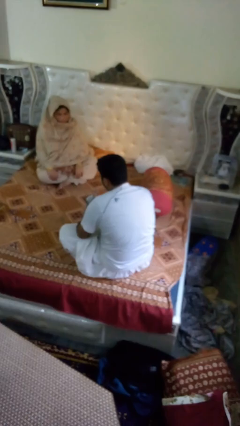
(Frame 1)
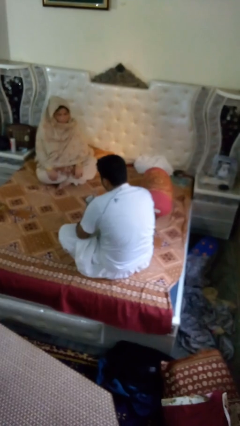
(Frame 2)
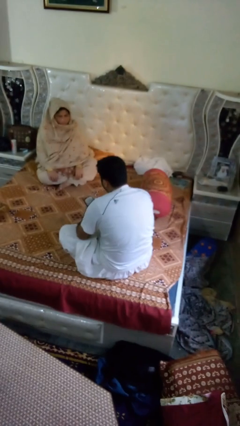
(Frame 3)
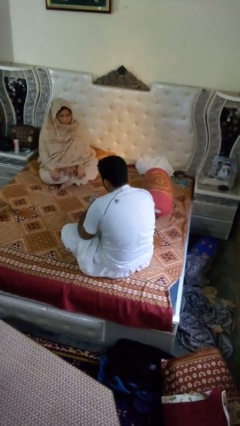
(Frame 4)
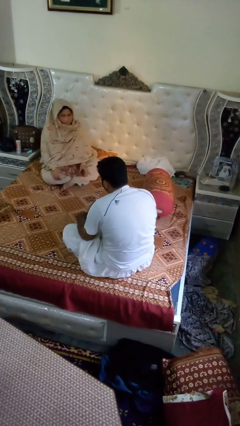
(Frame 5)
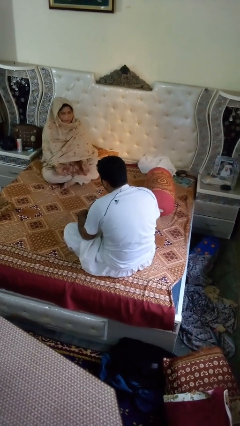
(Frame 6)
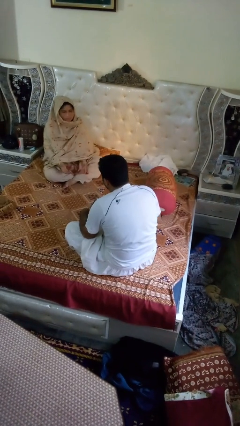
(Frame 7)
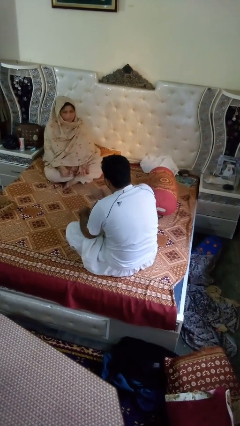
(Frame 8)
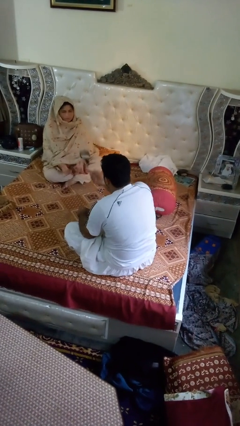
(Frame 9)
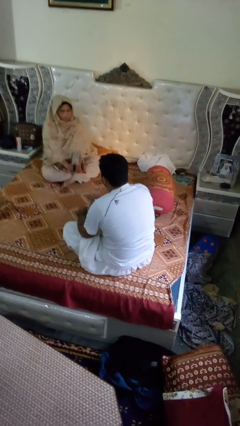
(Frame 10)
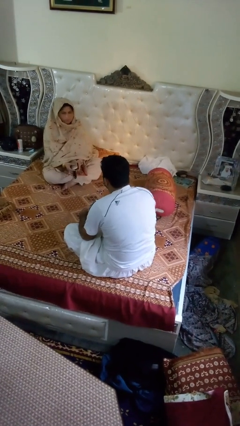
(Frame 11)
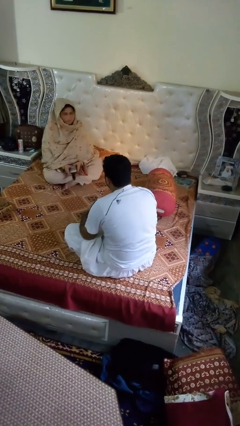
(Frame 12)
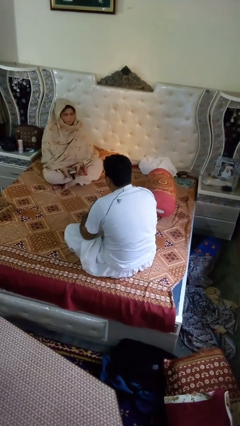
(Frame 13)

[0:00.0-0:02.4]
person throws object to person

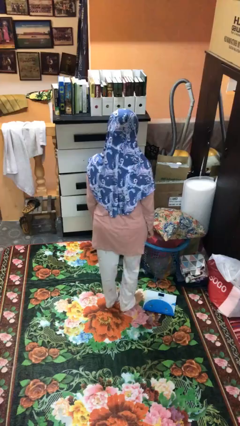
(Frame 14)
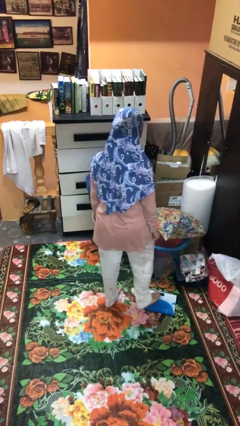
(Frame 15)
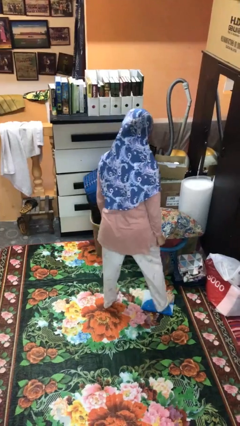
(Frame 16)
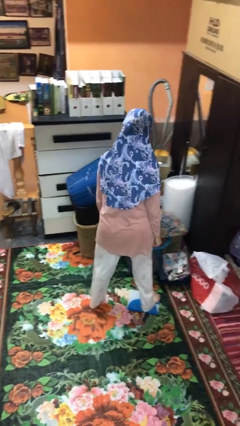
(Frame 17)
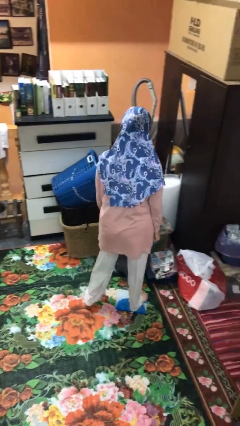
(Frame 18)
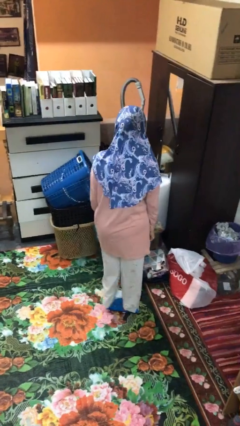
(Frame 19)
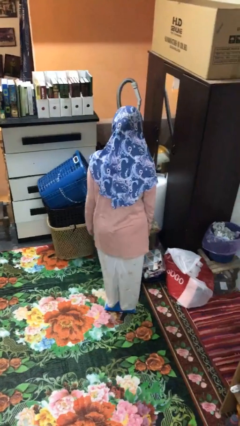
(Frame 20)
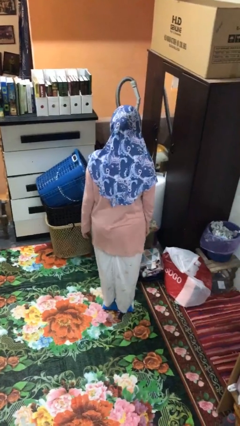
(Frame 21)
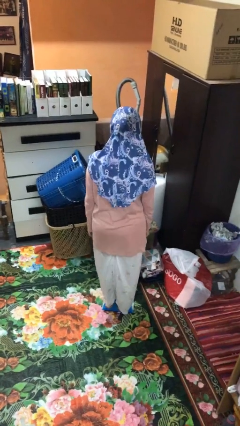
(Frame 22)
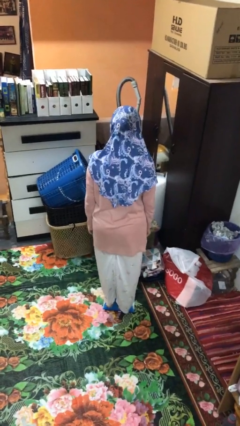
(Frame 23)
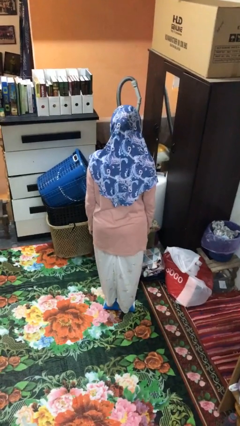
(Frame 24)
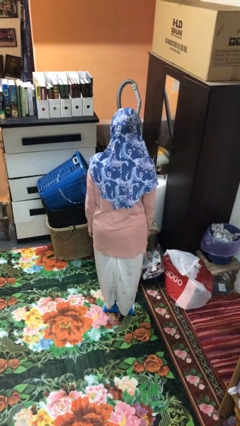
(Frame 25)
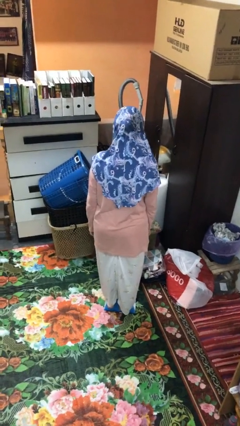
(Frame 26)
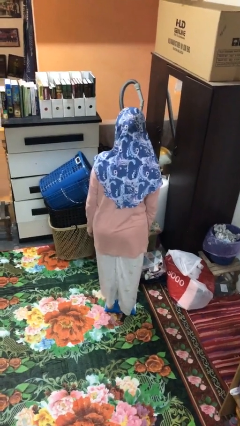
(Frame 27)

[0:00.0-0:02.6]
person uses bodyweight scale

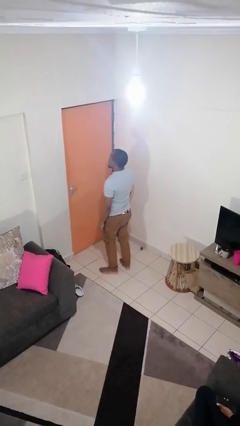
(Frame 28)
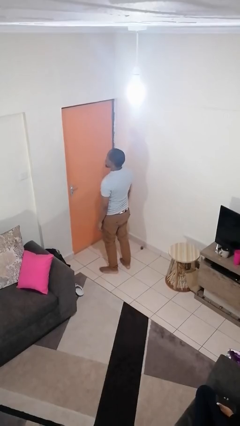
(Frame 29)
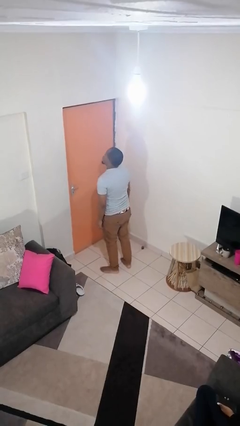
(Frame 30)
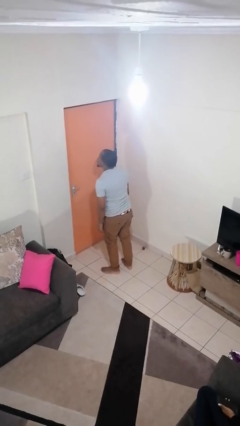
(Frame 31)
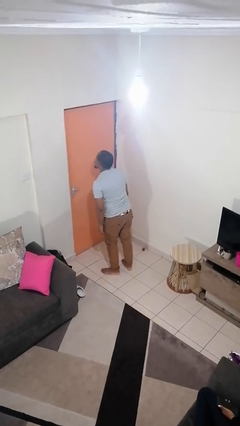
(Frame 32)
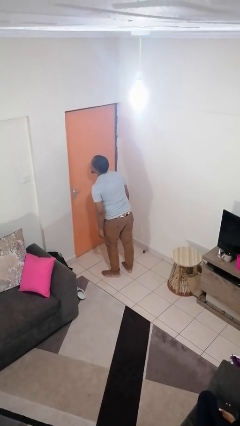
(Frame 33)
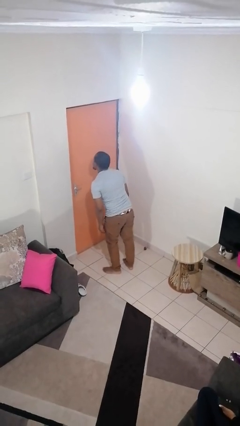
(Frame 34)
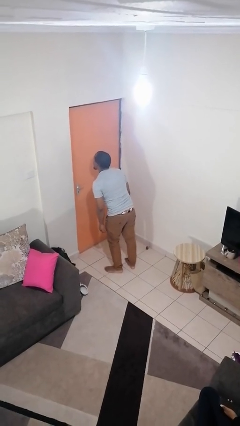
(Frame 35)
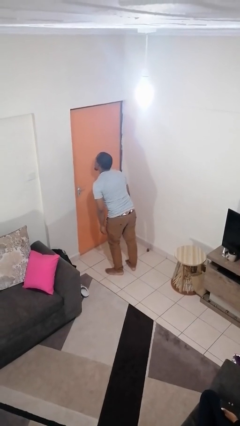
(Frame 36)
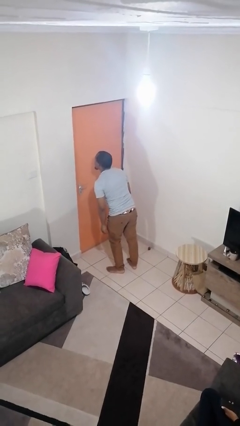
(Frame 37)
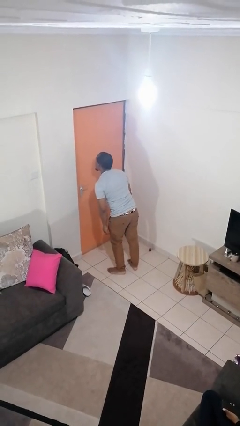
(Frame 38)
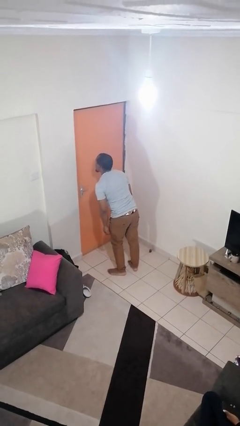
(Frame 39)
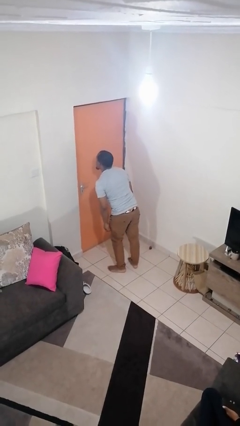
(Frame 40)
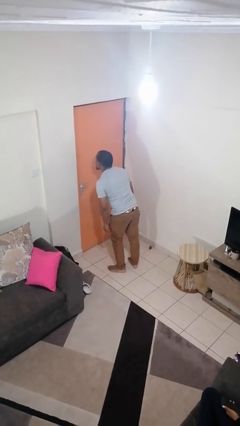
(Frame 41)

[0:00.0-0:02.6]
person sticks out tongue

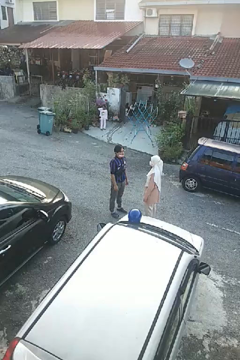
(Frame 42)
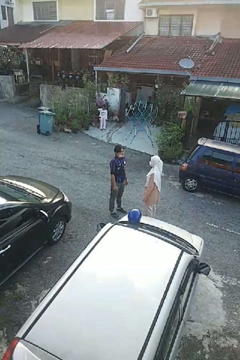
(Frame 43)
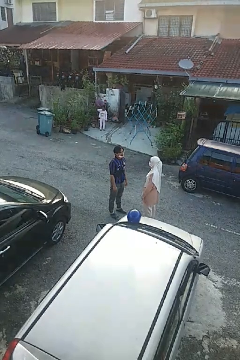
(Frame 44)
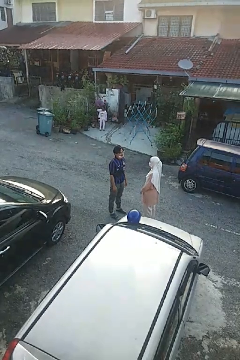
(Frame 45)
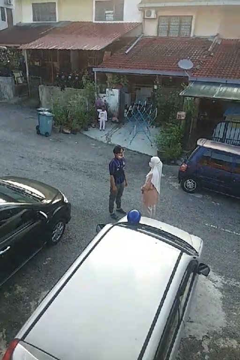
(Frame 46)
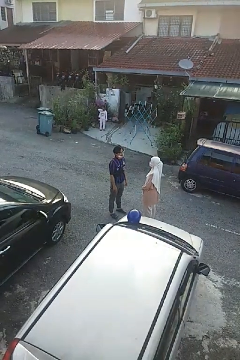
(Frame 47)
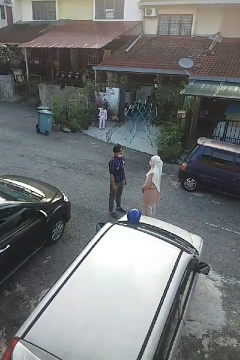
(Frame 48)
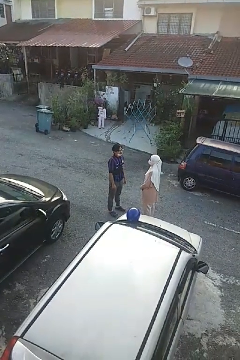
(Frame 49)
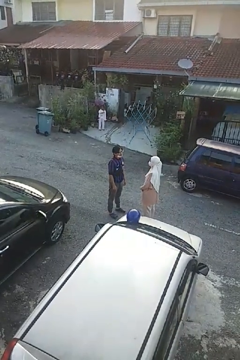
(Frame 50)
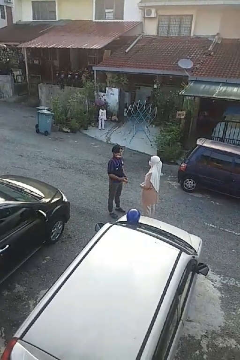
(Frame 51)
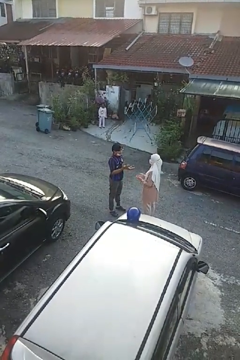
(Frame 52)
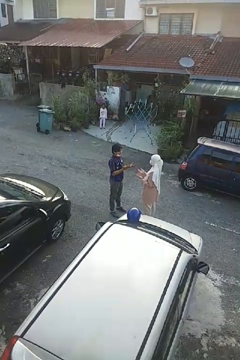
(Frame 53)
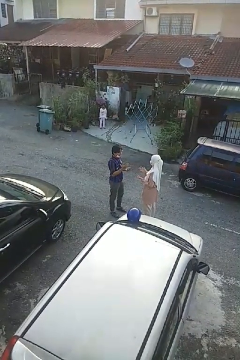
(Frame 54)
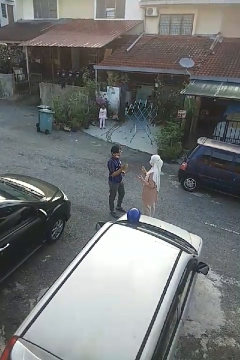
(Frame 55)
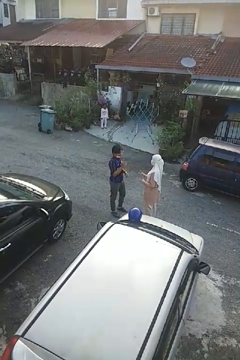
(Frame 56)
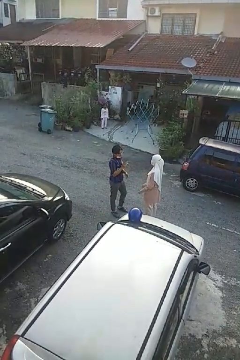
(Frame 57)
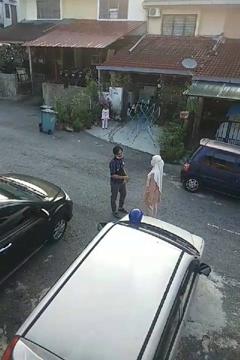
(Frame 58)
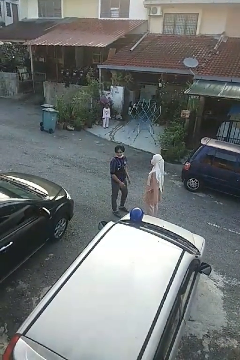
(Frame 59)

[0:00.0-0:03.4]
person talks to person

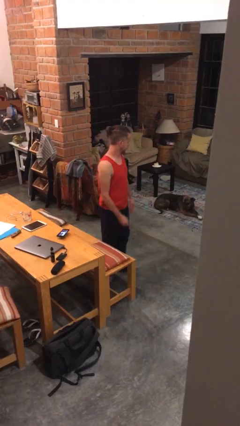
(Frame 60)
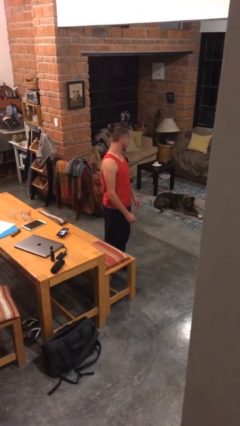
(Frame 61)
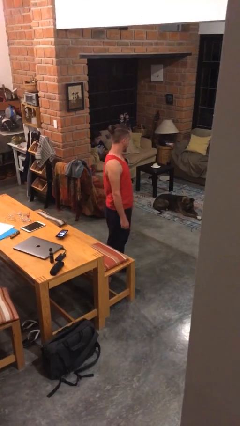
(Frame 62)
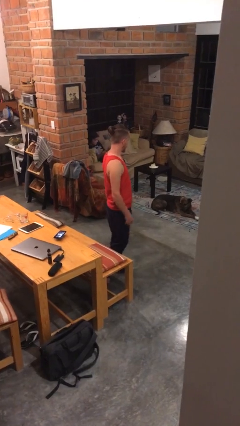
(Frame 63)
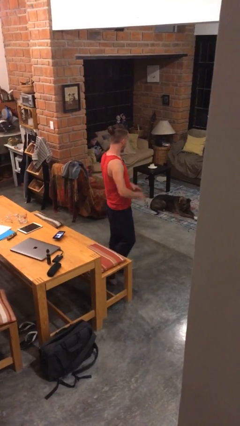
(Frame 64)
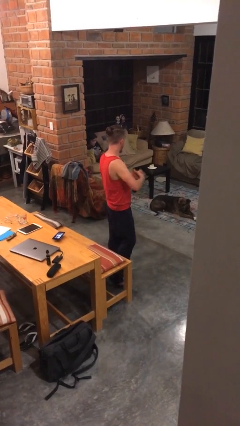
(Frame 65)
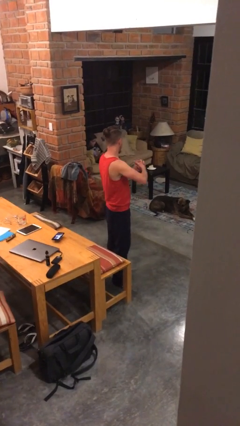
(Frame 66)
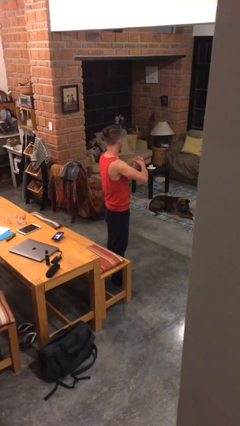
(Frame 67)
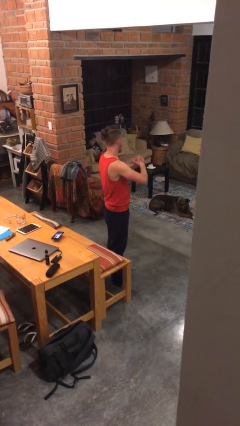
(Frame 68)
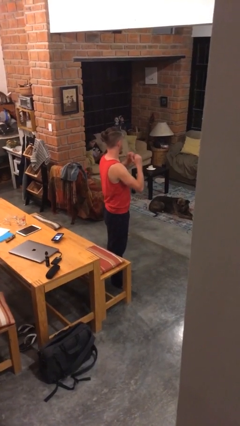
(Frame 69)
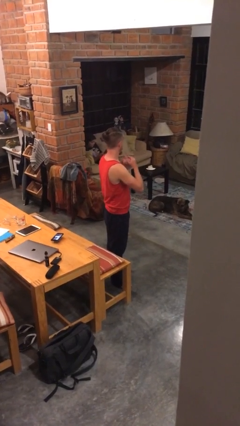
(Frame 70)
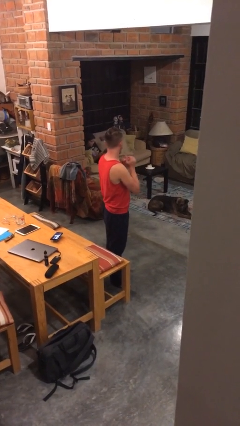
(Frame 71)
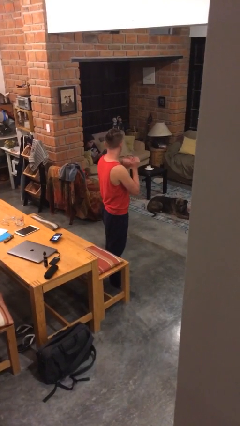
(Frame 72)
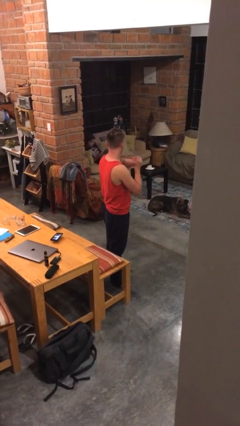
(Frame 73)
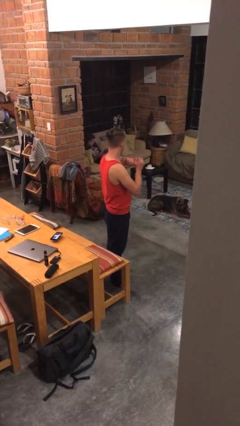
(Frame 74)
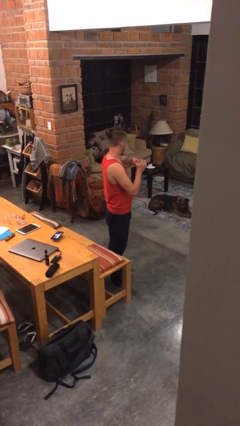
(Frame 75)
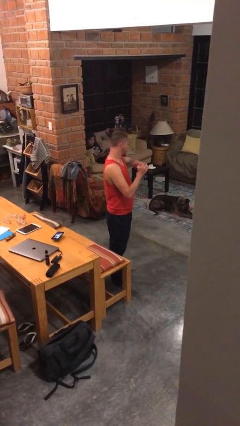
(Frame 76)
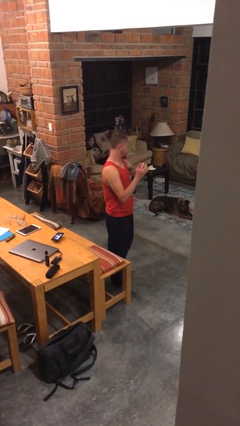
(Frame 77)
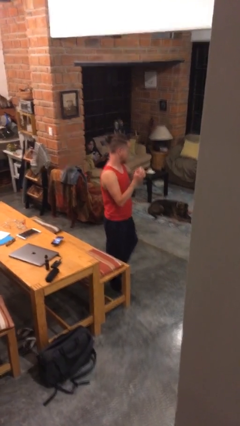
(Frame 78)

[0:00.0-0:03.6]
person cracks knuckles

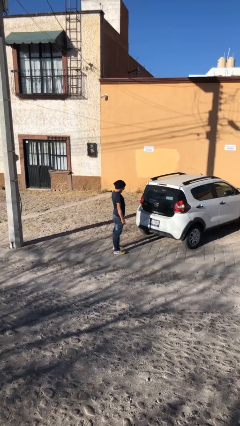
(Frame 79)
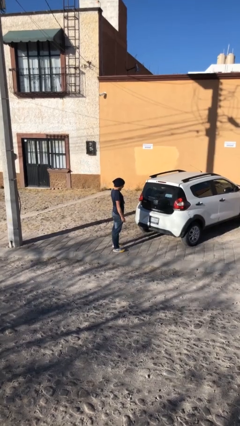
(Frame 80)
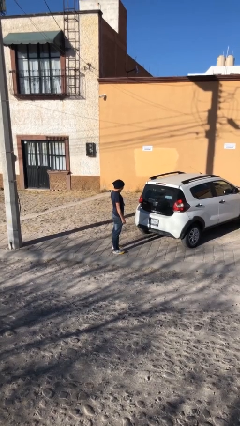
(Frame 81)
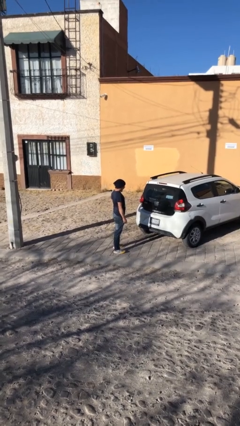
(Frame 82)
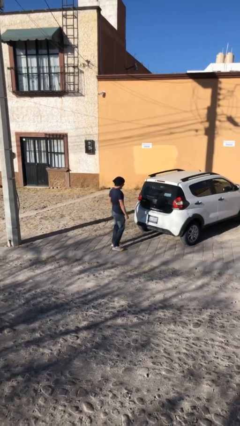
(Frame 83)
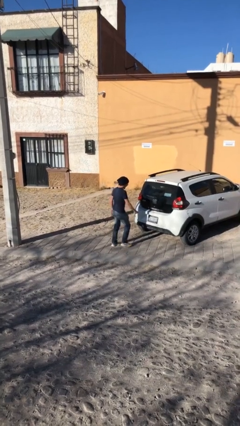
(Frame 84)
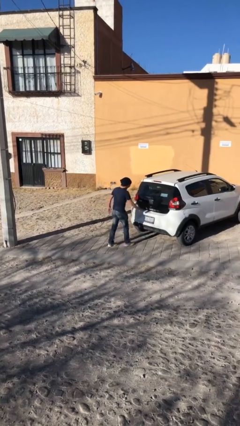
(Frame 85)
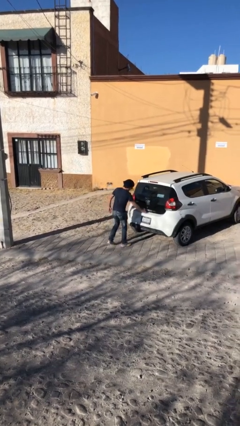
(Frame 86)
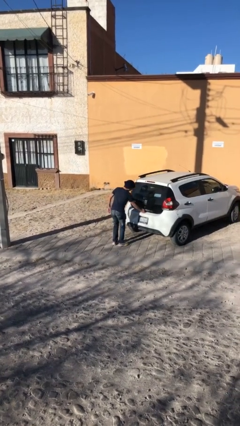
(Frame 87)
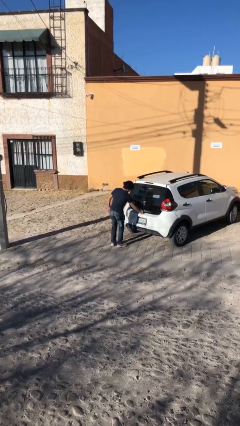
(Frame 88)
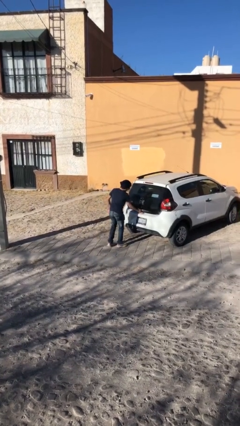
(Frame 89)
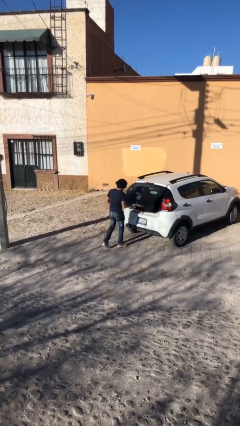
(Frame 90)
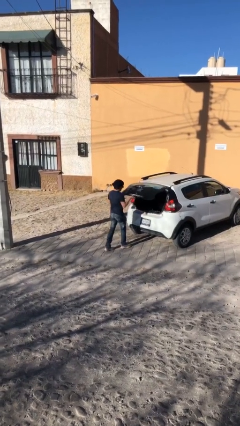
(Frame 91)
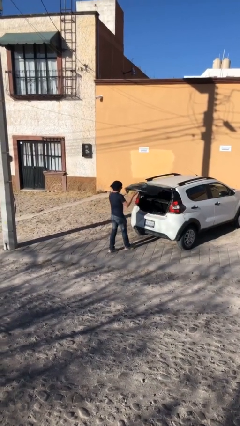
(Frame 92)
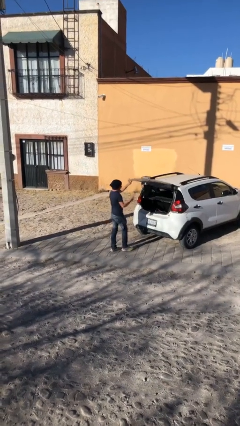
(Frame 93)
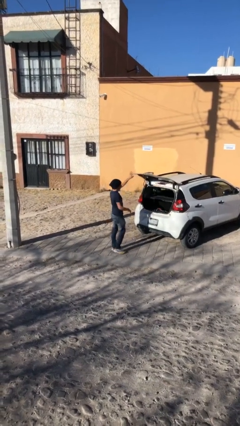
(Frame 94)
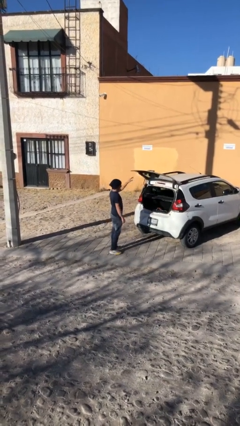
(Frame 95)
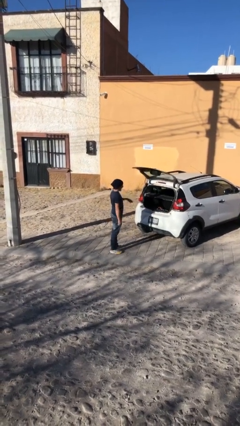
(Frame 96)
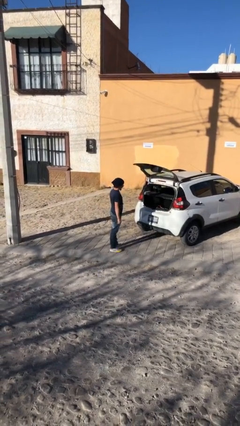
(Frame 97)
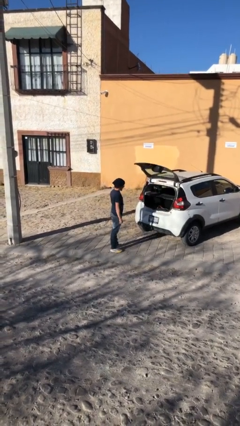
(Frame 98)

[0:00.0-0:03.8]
person opens car trunk
